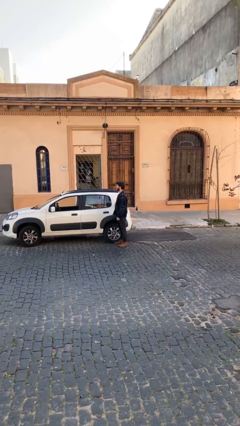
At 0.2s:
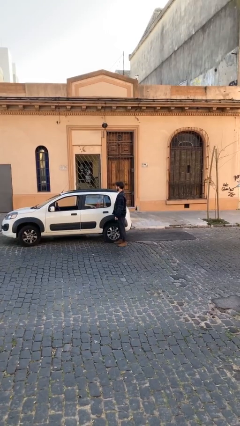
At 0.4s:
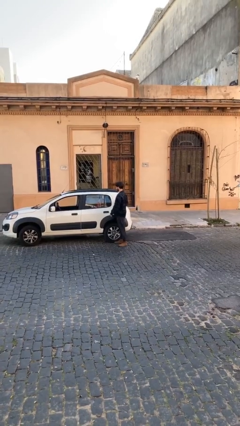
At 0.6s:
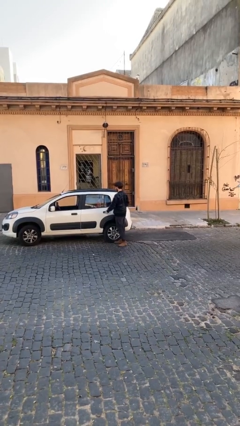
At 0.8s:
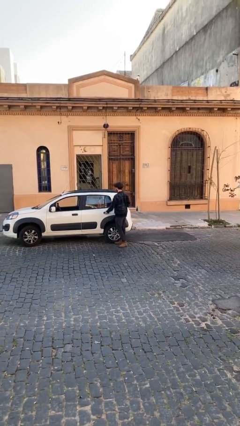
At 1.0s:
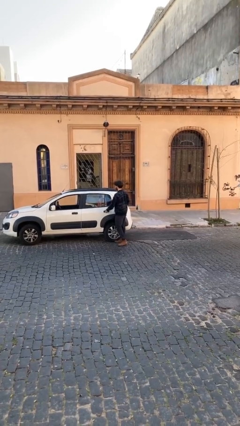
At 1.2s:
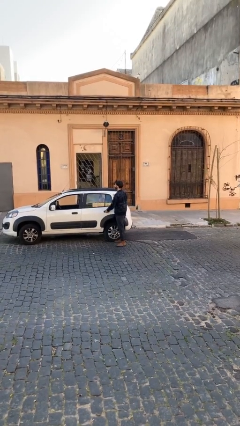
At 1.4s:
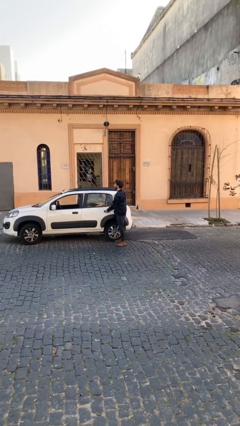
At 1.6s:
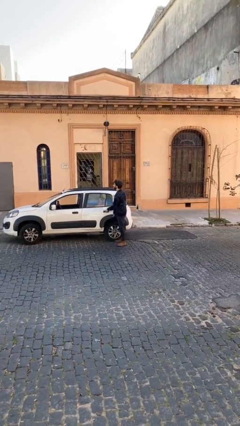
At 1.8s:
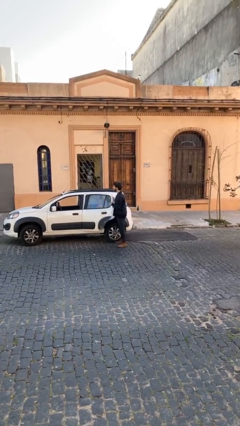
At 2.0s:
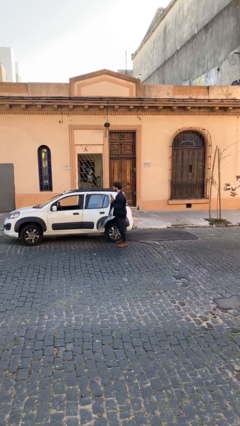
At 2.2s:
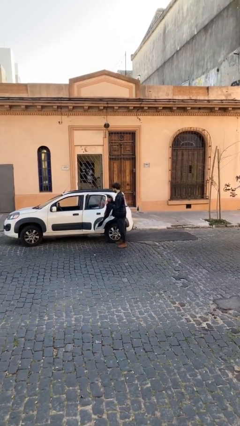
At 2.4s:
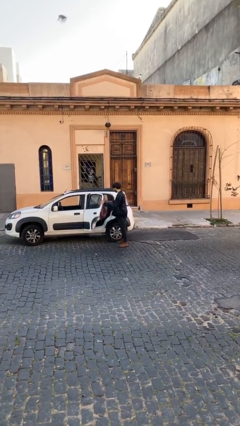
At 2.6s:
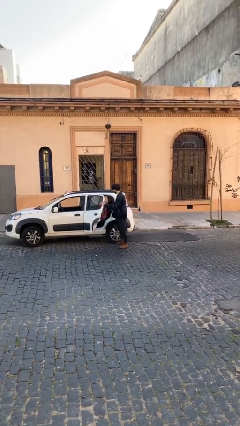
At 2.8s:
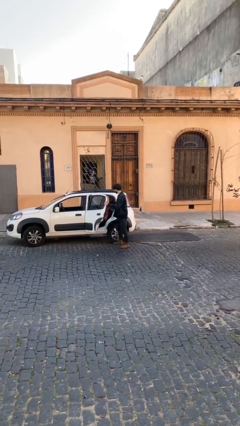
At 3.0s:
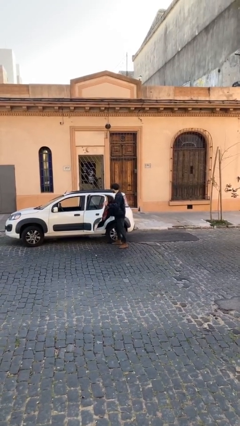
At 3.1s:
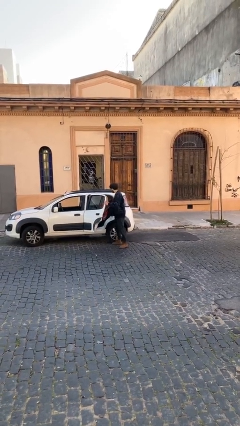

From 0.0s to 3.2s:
person opens car door

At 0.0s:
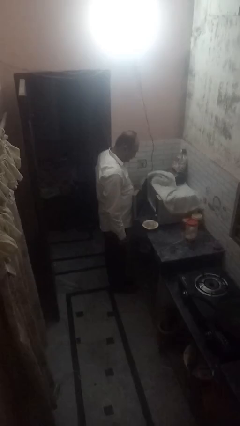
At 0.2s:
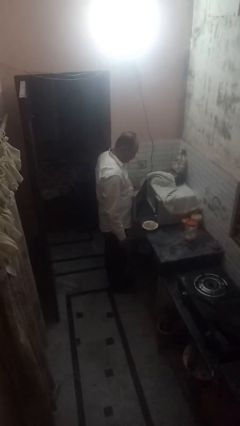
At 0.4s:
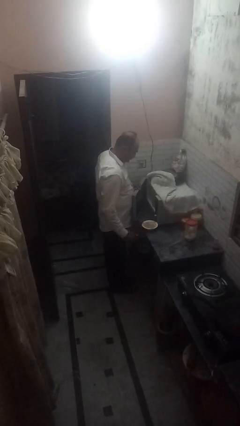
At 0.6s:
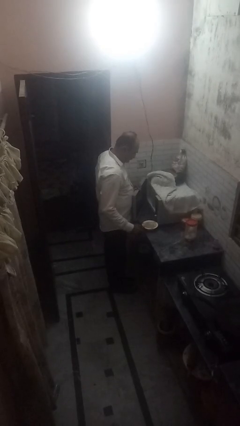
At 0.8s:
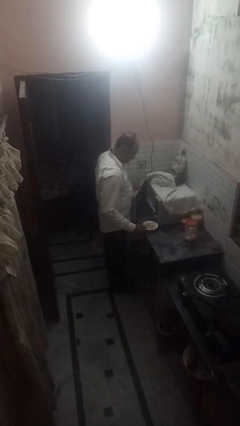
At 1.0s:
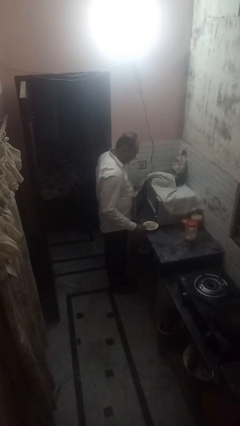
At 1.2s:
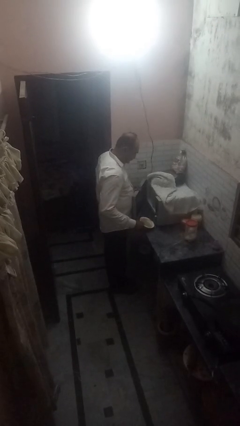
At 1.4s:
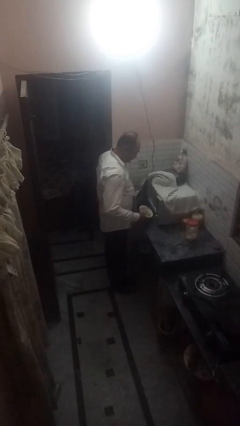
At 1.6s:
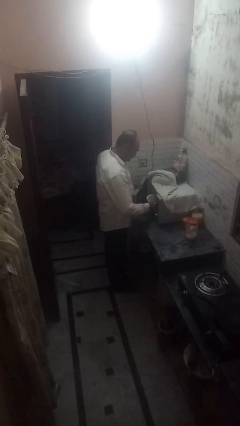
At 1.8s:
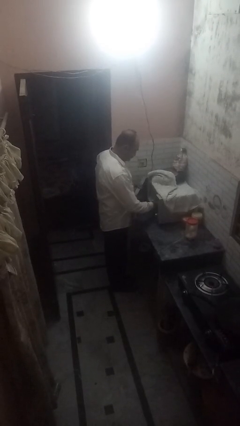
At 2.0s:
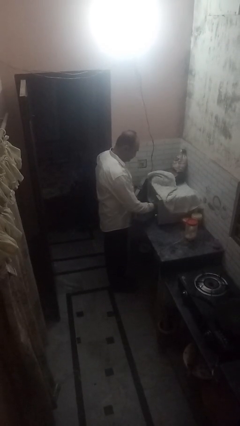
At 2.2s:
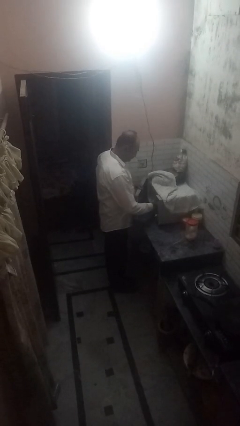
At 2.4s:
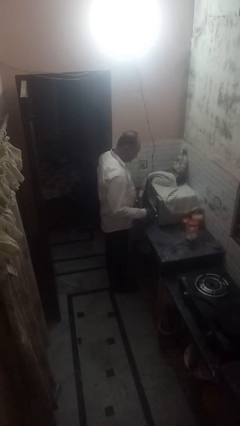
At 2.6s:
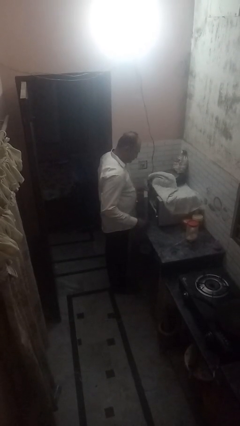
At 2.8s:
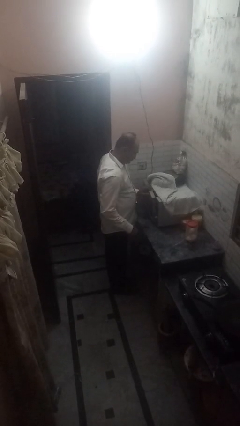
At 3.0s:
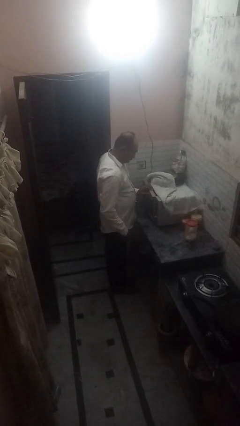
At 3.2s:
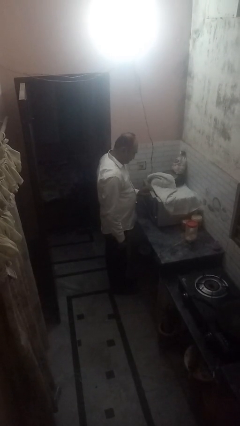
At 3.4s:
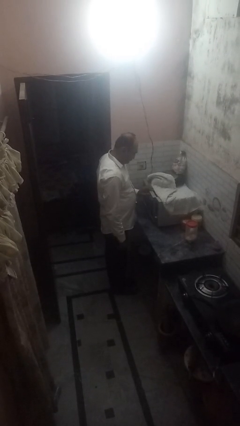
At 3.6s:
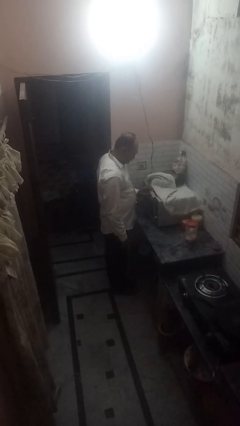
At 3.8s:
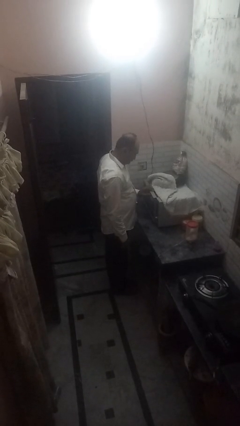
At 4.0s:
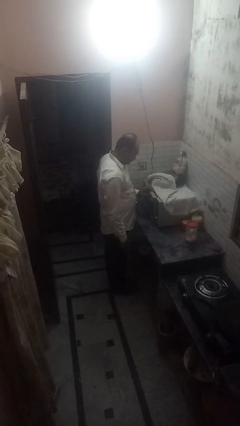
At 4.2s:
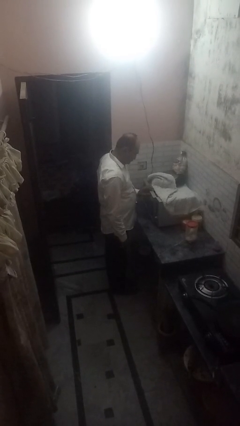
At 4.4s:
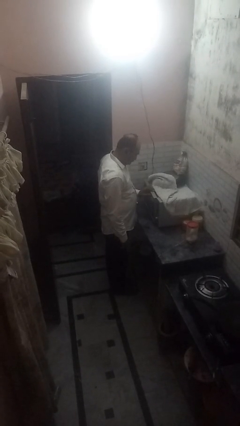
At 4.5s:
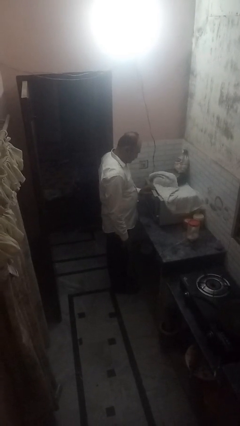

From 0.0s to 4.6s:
person puts object into microwave

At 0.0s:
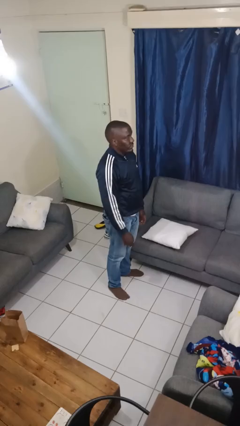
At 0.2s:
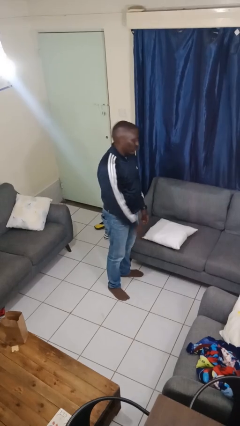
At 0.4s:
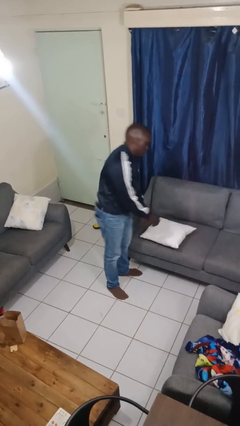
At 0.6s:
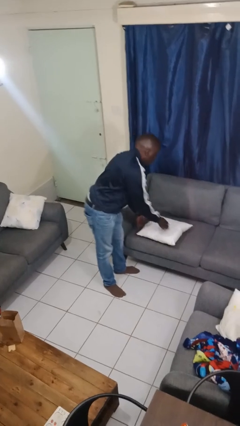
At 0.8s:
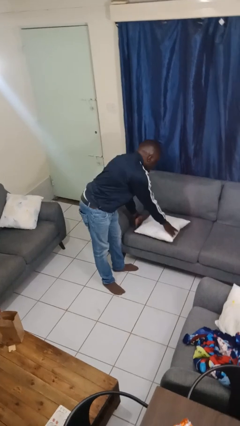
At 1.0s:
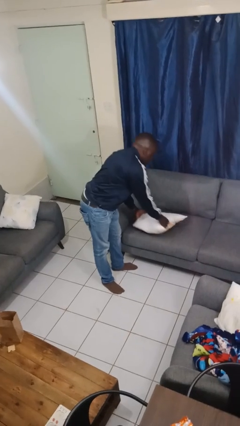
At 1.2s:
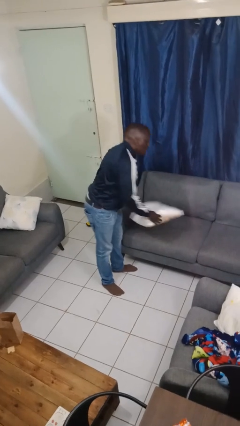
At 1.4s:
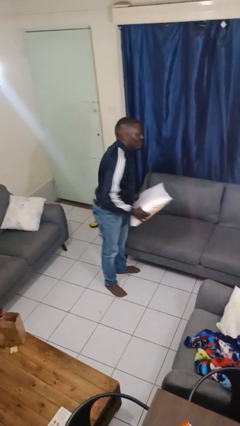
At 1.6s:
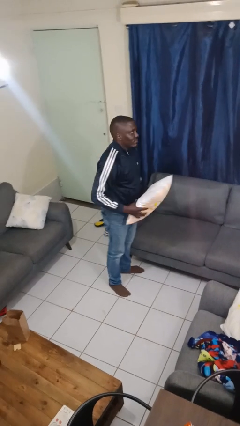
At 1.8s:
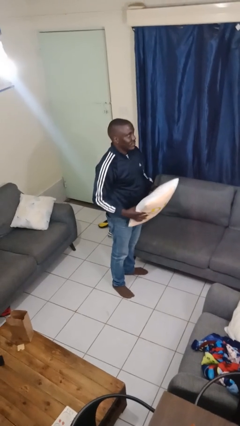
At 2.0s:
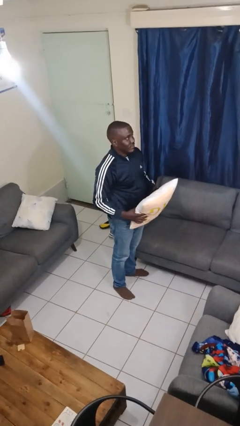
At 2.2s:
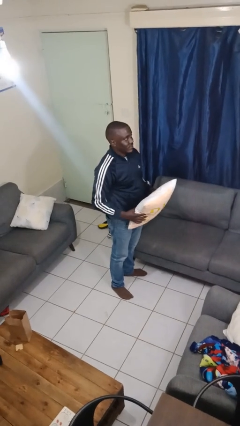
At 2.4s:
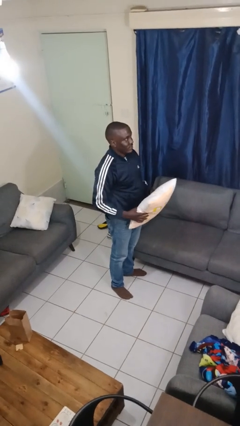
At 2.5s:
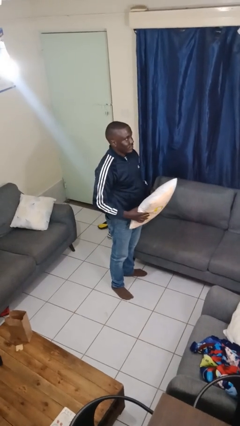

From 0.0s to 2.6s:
person picks up object from couch

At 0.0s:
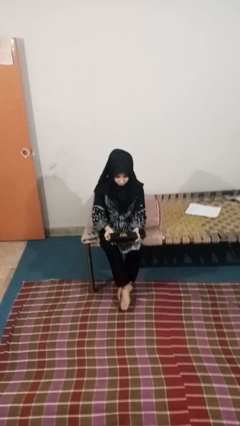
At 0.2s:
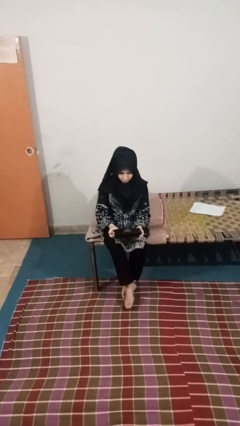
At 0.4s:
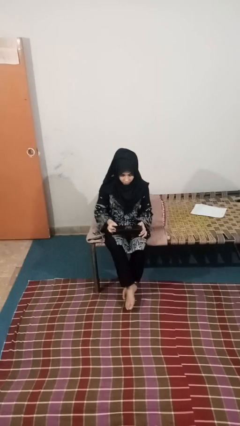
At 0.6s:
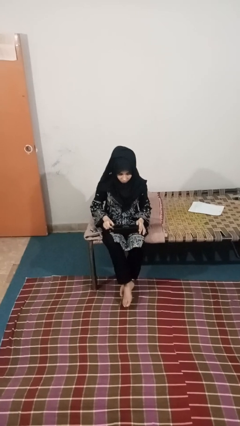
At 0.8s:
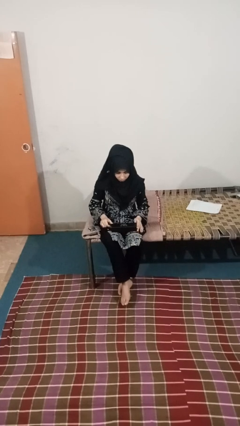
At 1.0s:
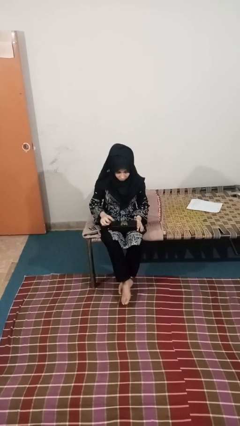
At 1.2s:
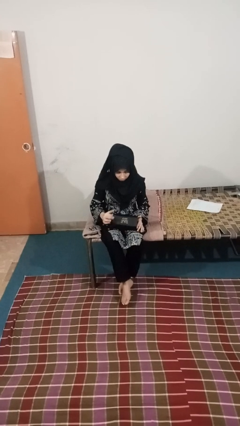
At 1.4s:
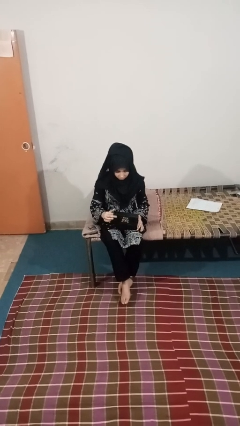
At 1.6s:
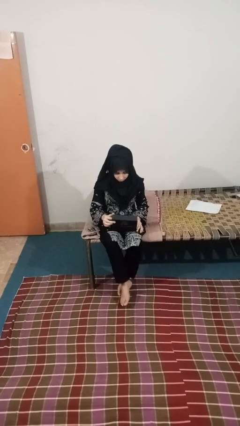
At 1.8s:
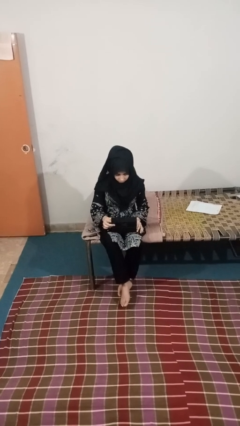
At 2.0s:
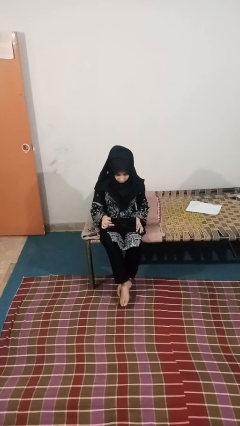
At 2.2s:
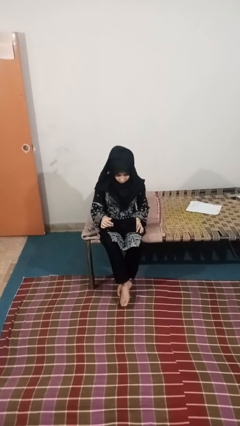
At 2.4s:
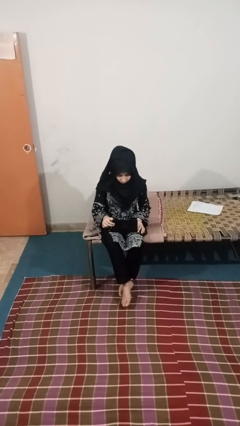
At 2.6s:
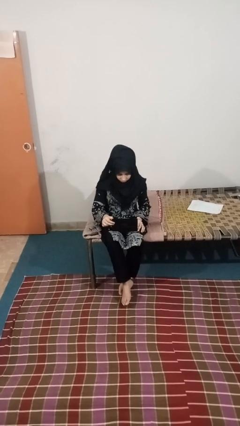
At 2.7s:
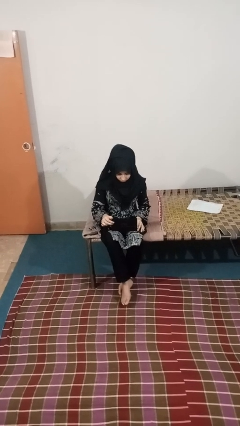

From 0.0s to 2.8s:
person opens jewelry box

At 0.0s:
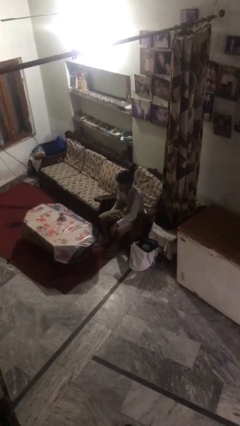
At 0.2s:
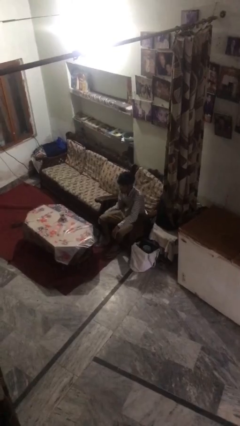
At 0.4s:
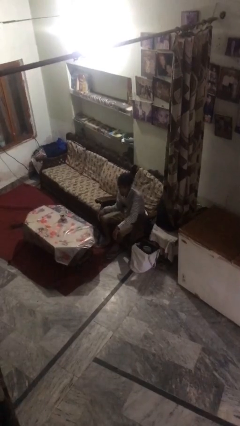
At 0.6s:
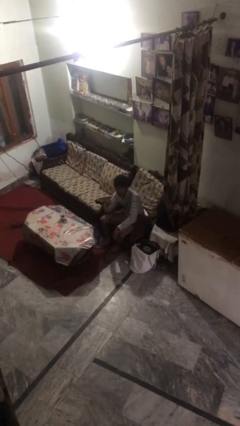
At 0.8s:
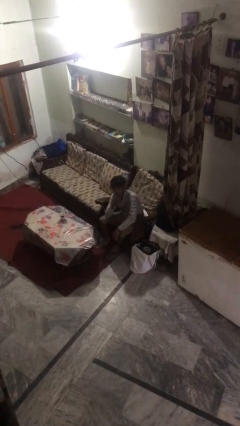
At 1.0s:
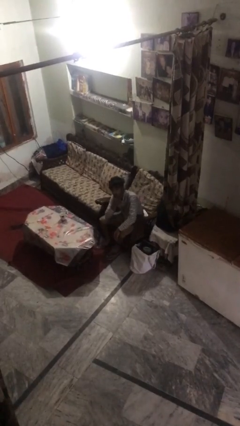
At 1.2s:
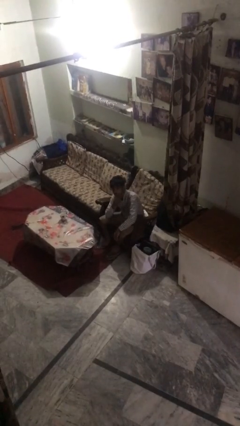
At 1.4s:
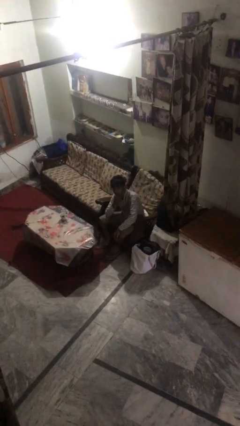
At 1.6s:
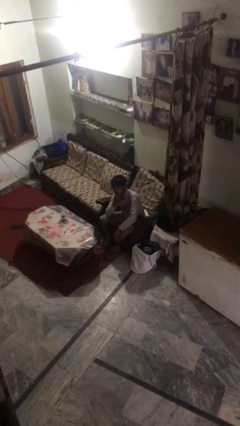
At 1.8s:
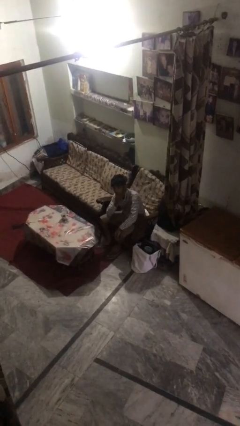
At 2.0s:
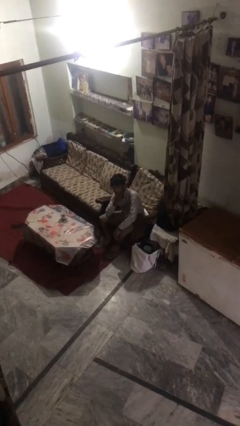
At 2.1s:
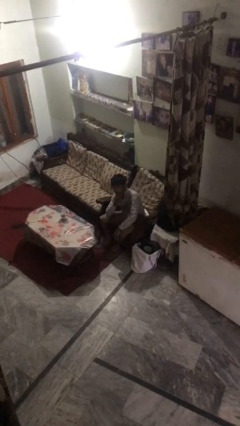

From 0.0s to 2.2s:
person strokes chin

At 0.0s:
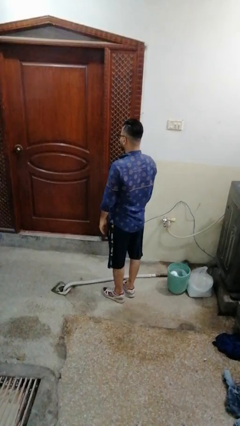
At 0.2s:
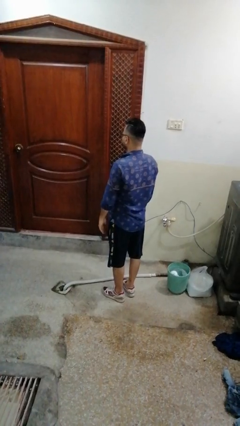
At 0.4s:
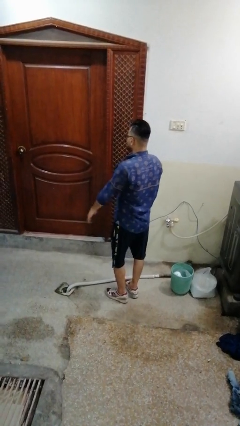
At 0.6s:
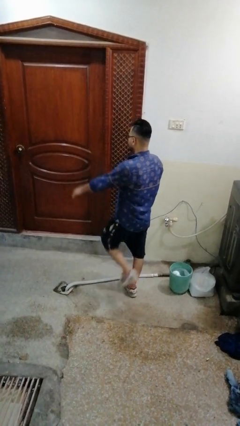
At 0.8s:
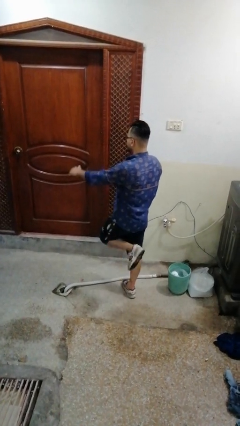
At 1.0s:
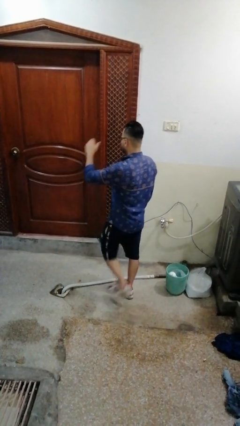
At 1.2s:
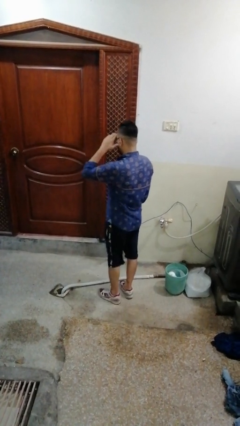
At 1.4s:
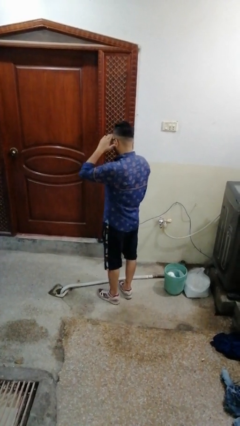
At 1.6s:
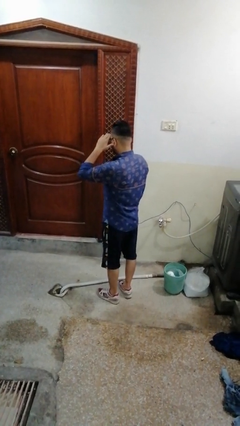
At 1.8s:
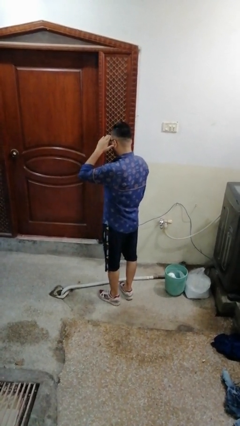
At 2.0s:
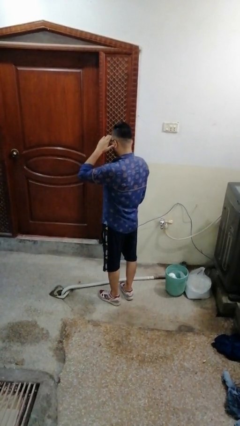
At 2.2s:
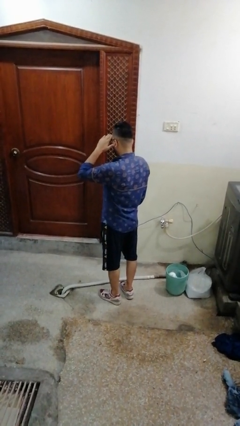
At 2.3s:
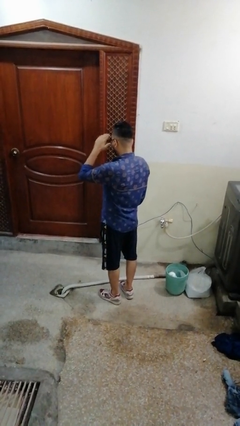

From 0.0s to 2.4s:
person salutes

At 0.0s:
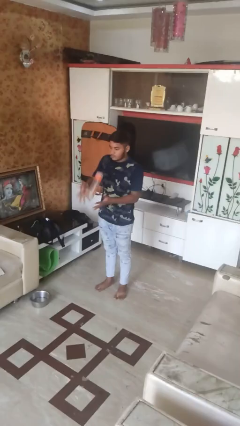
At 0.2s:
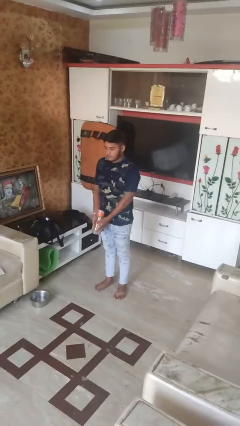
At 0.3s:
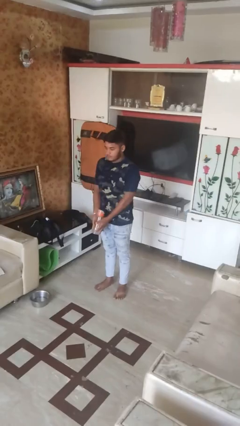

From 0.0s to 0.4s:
person catches dropped object
